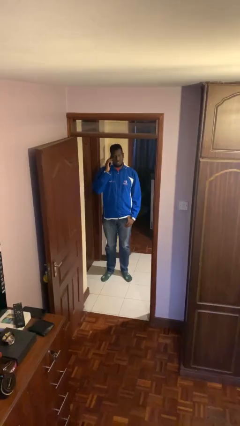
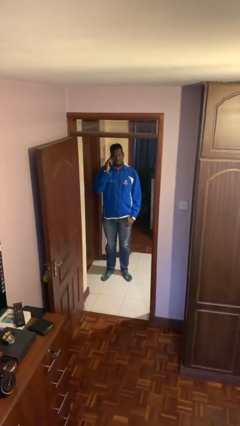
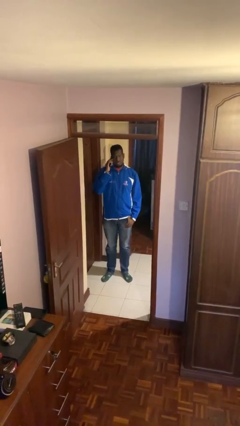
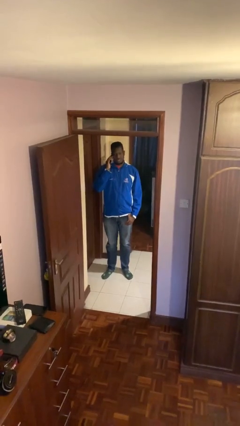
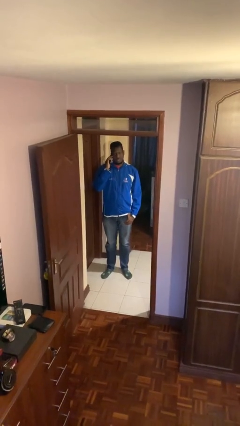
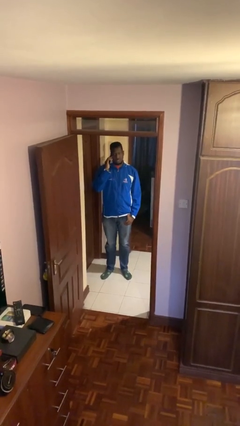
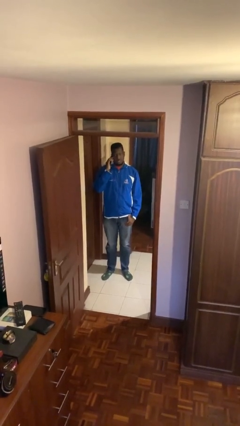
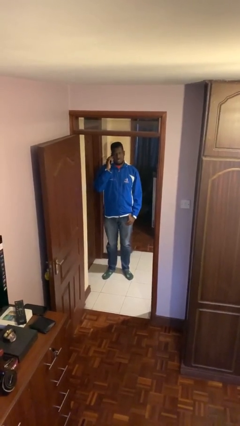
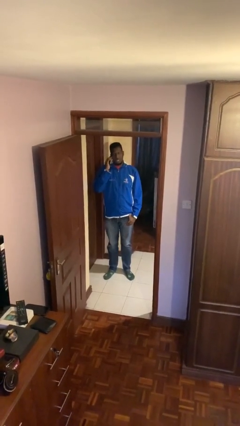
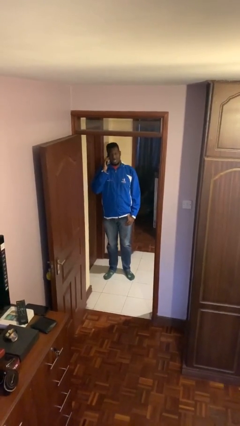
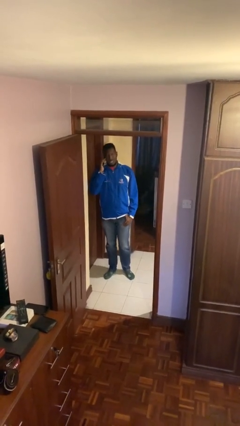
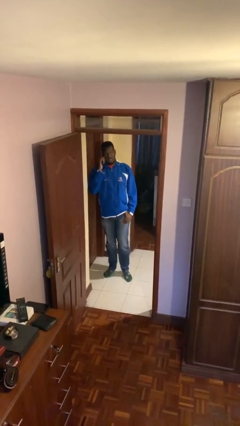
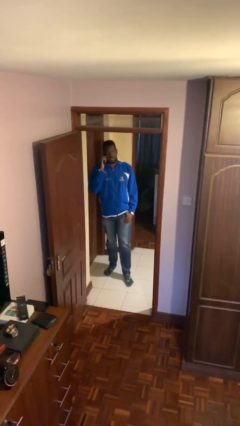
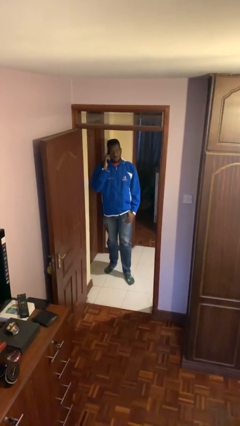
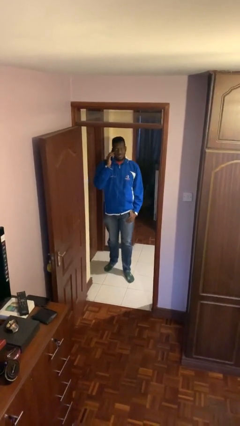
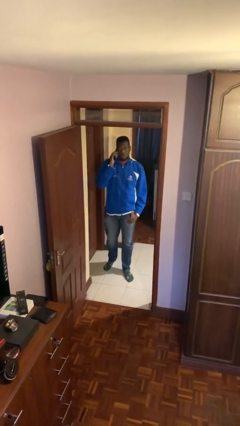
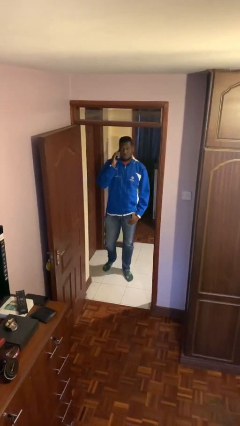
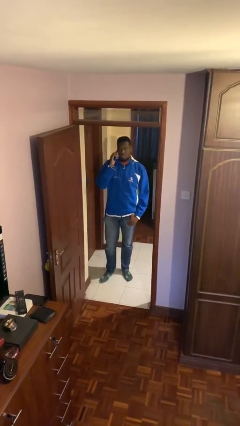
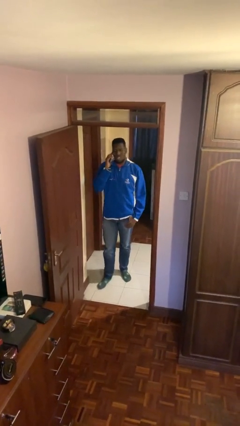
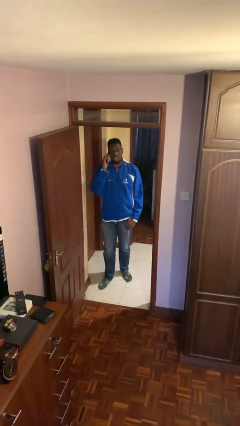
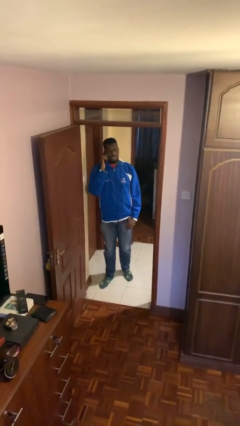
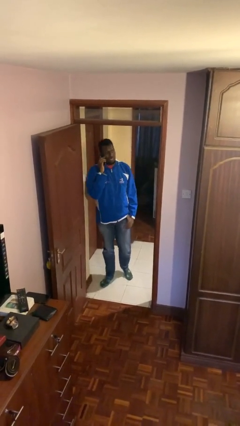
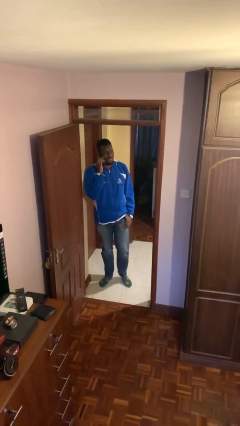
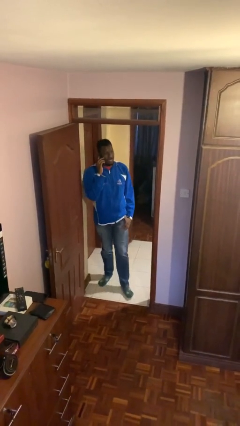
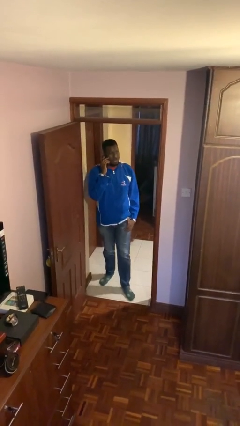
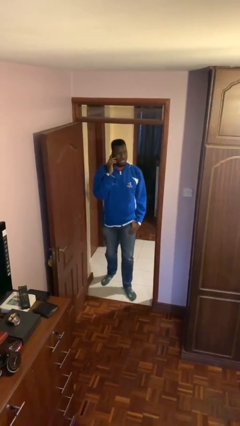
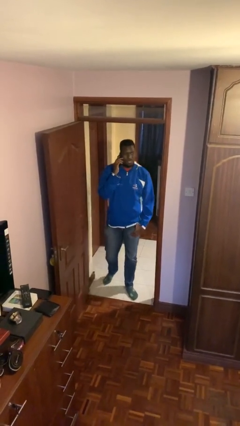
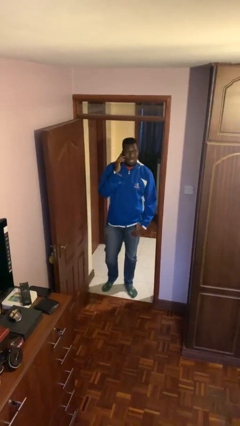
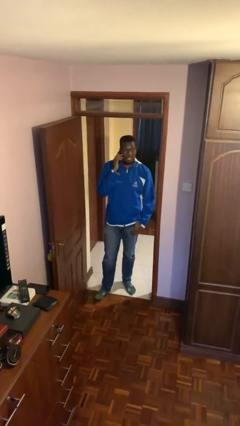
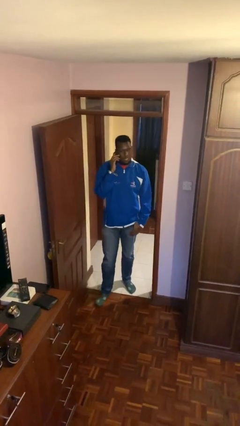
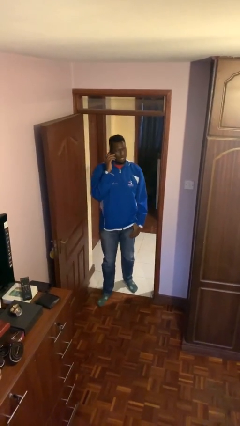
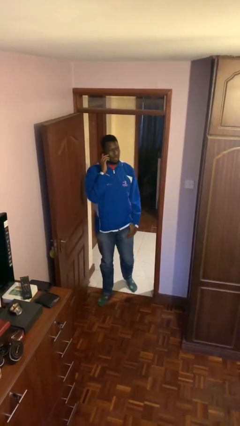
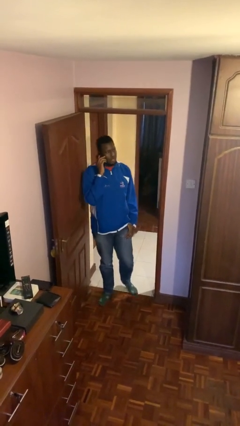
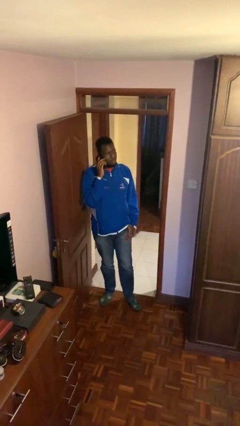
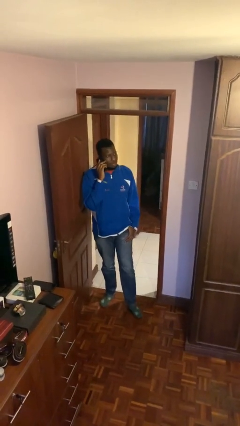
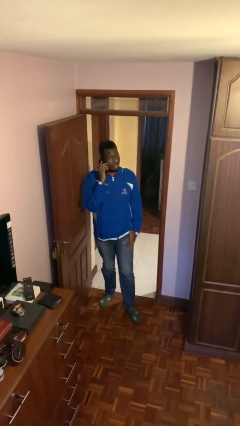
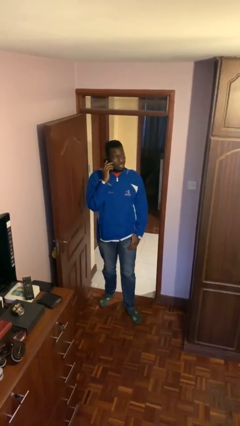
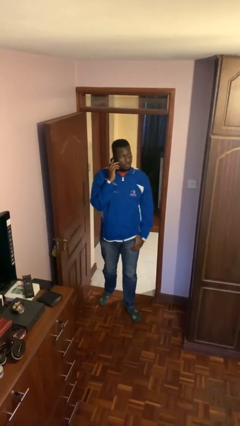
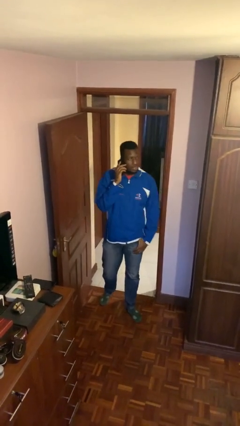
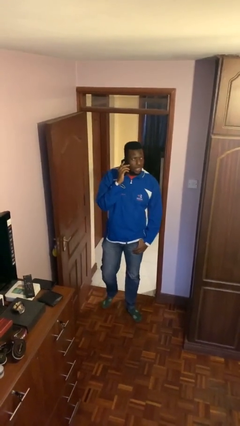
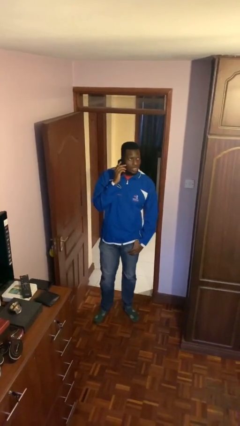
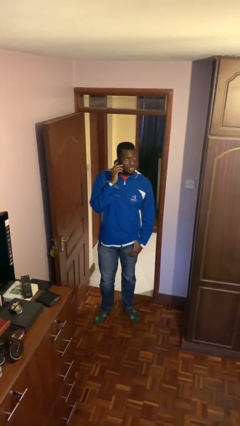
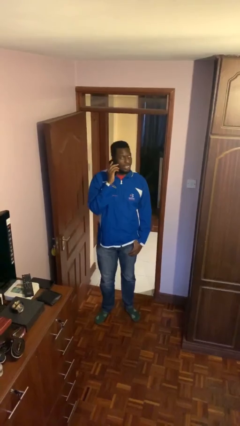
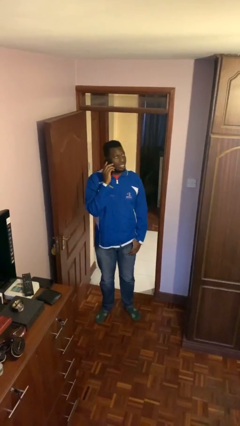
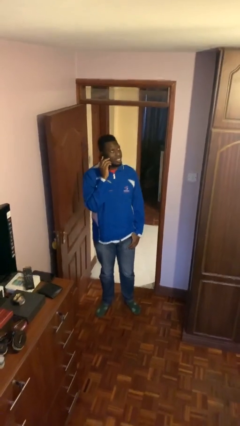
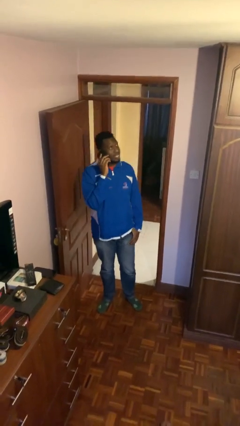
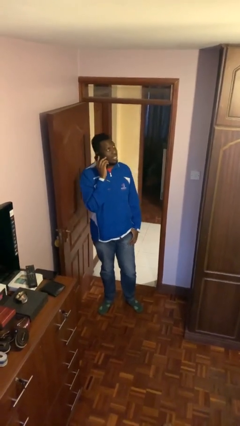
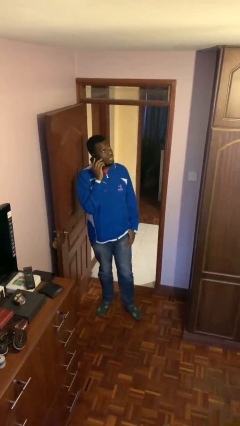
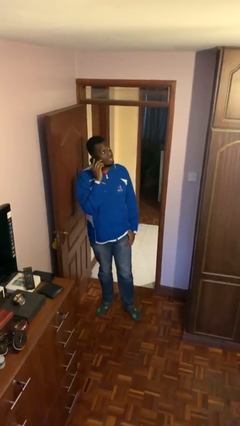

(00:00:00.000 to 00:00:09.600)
person enters scene through structure

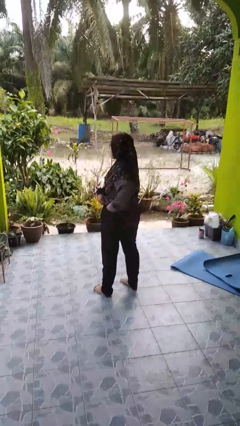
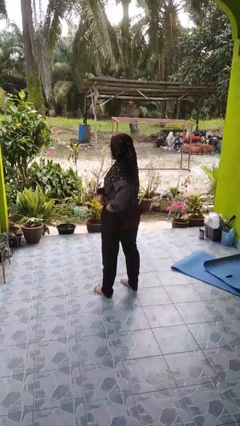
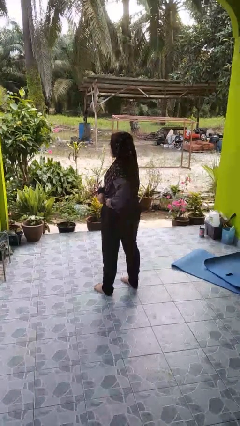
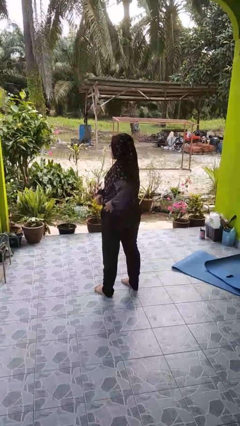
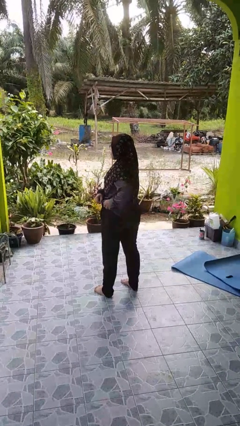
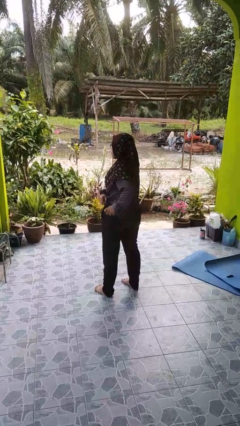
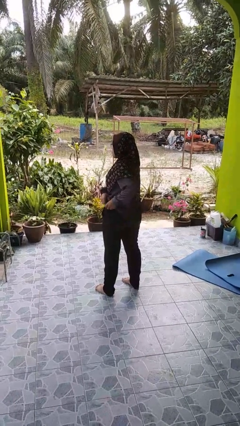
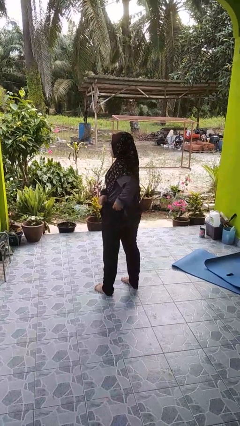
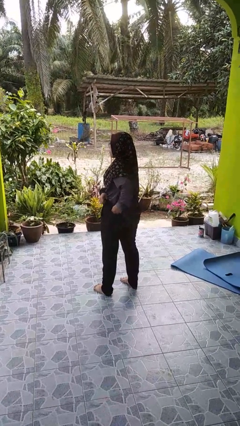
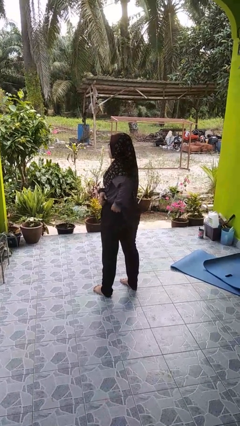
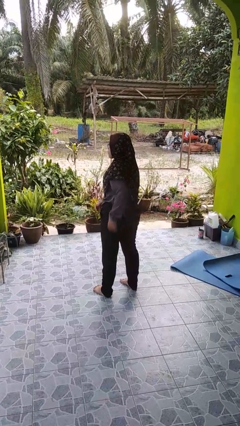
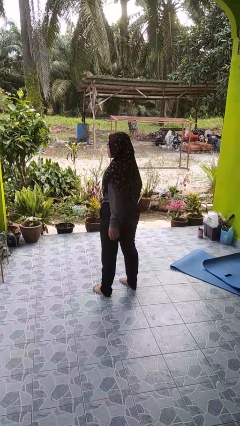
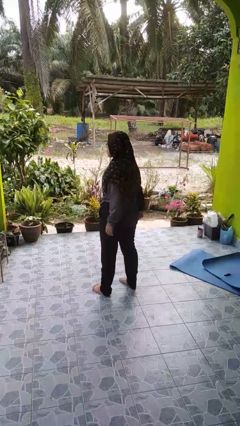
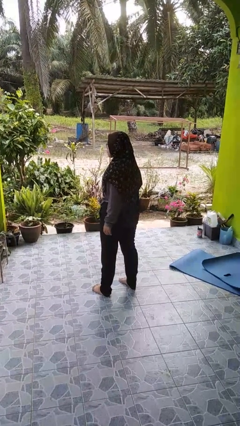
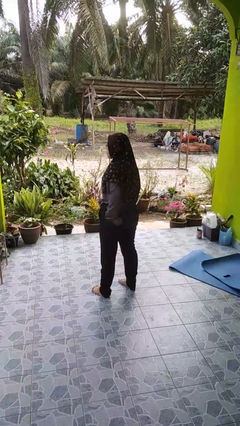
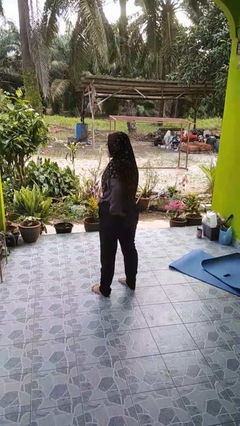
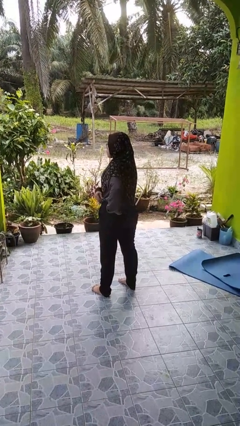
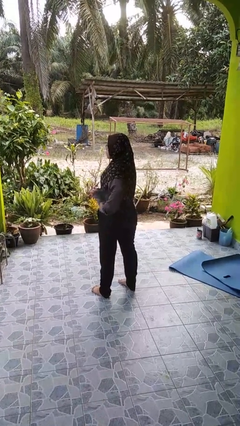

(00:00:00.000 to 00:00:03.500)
person tucks in shirt

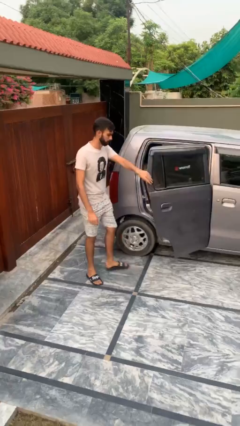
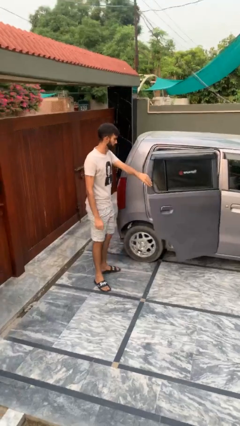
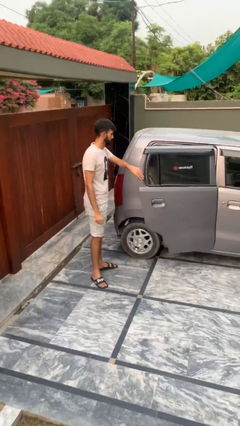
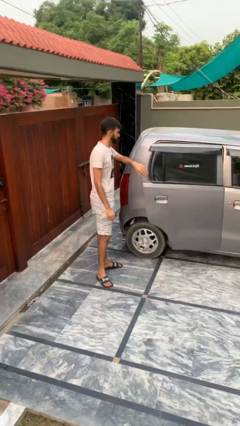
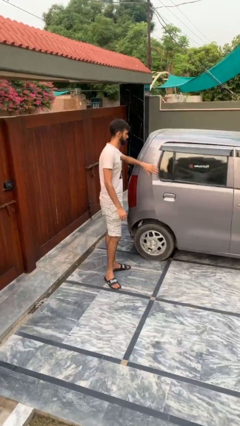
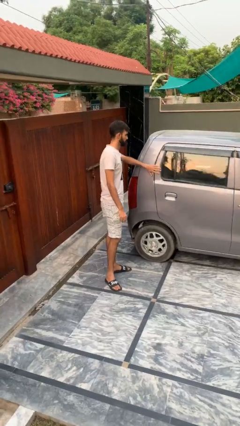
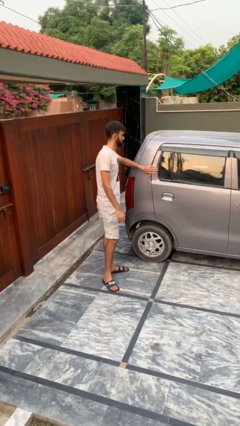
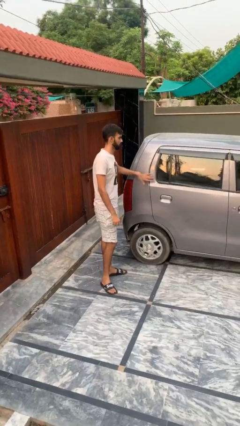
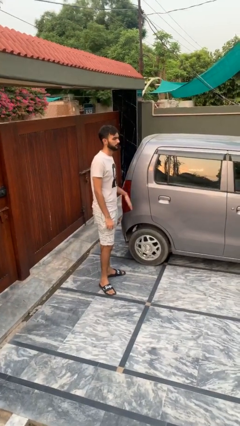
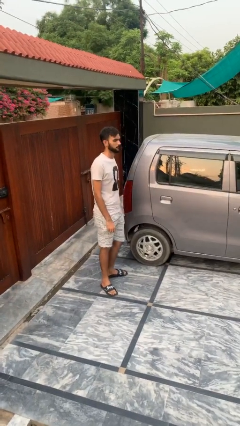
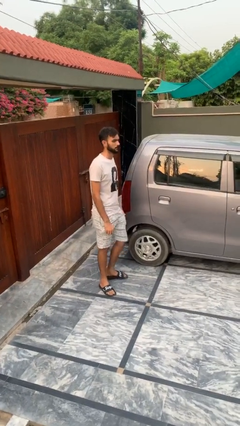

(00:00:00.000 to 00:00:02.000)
person closes car door

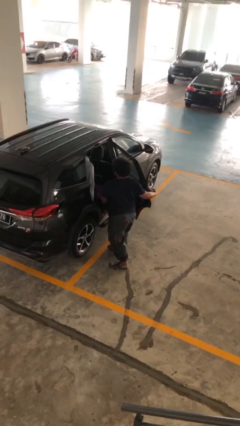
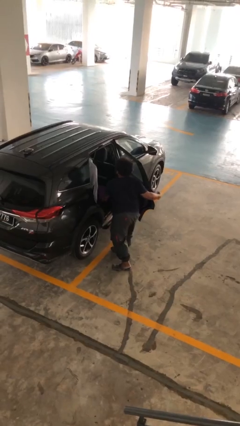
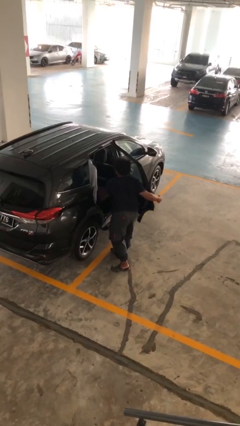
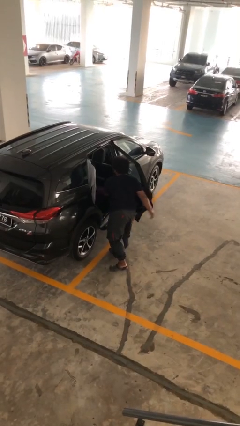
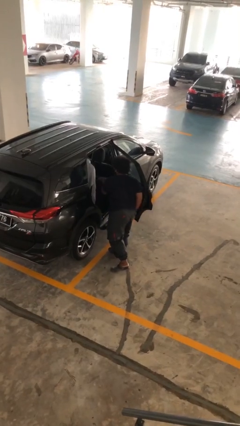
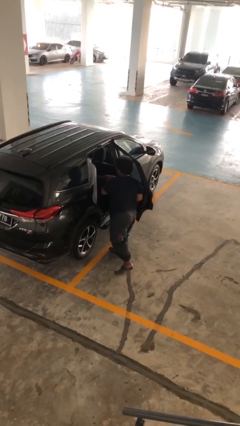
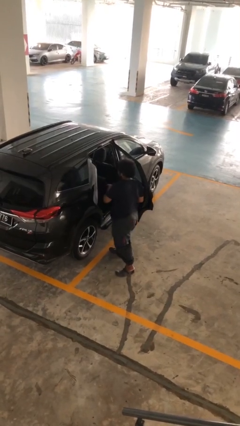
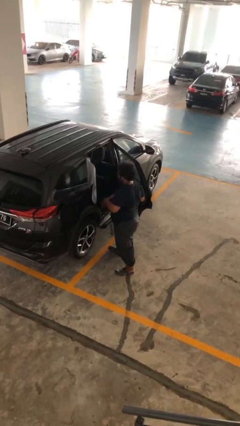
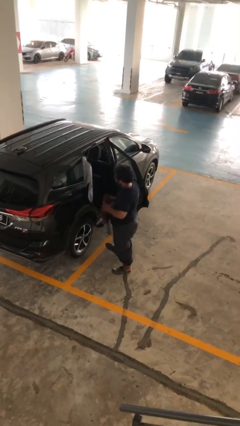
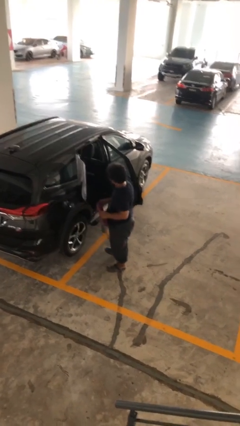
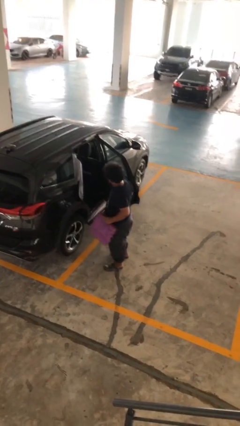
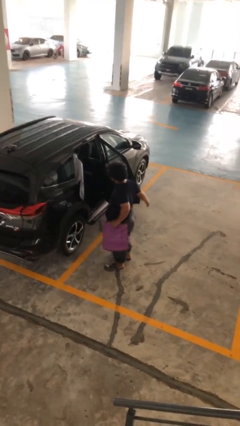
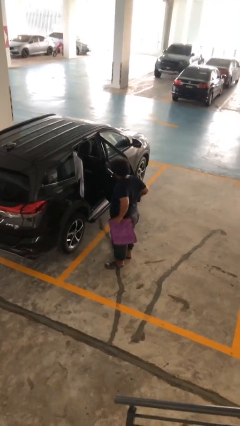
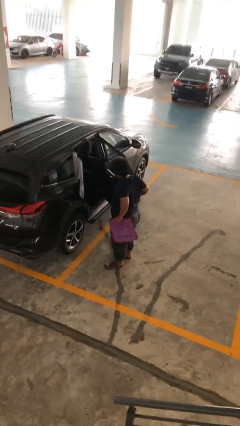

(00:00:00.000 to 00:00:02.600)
person unloads car

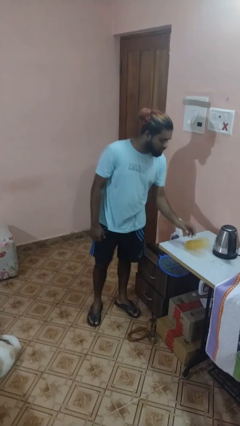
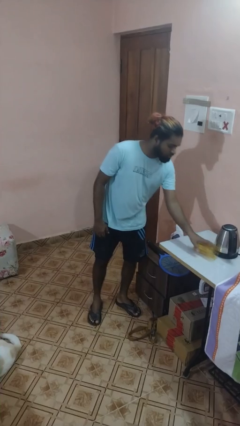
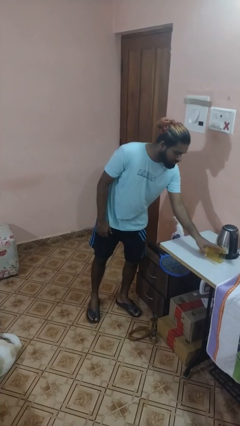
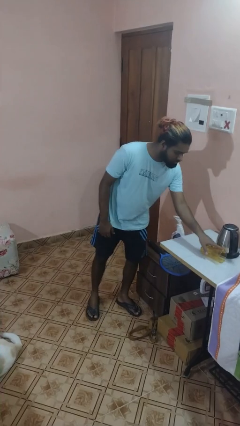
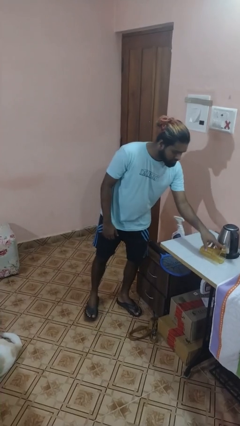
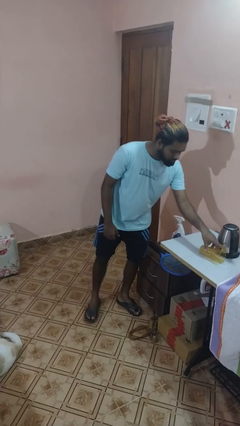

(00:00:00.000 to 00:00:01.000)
person knocks over glass
